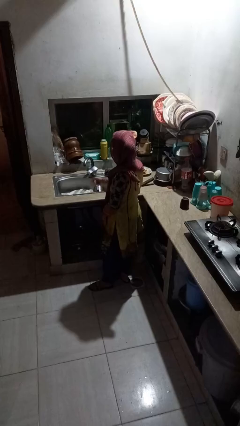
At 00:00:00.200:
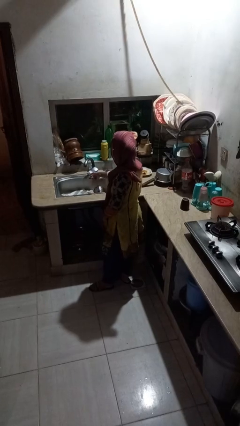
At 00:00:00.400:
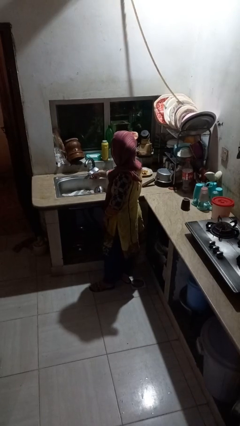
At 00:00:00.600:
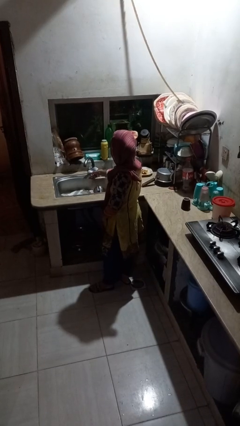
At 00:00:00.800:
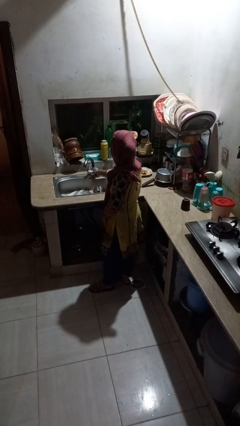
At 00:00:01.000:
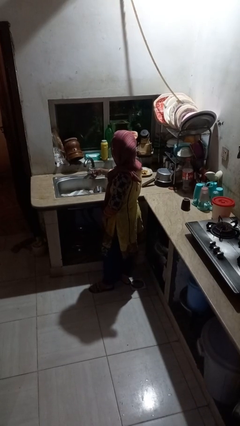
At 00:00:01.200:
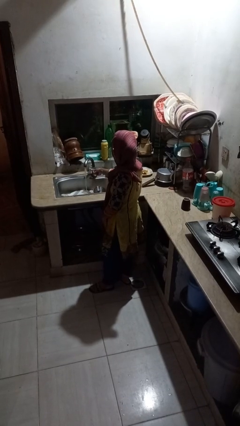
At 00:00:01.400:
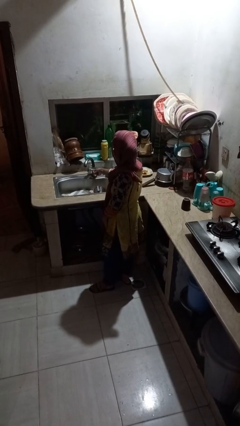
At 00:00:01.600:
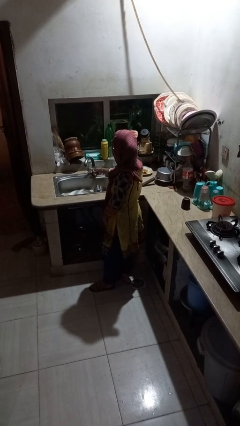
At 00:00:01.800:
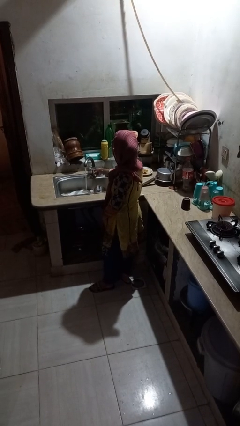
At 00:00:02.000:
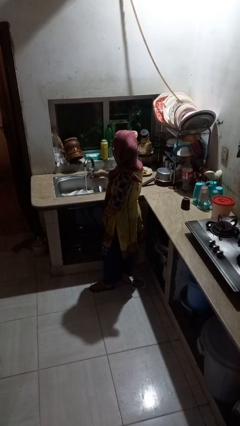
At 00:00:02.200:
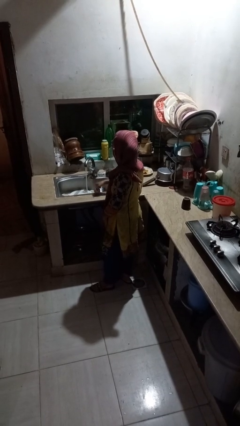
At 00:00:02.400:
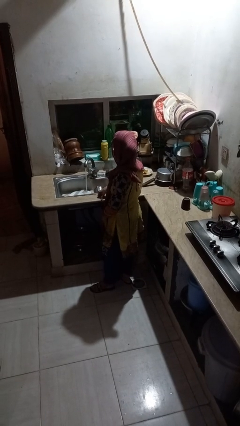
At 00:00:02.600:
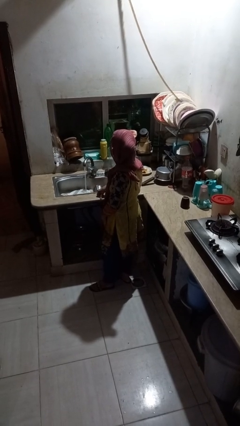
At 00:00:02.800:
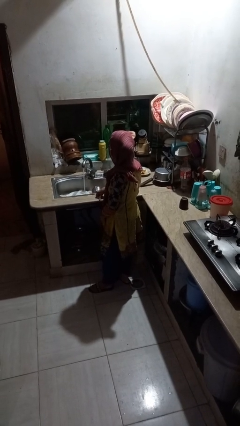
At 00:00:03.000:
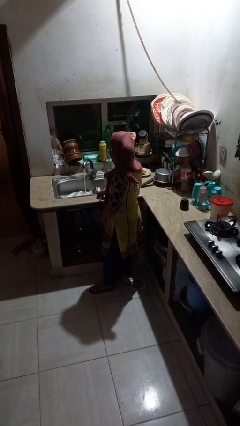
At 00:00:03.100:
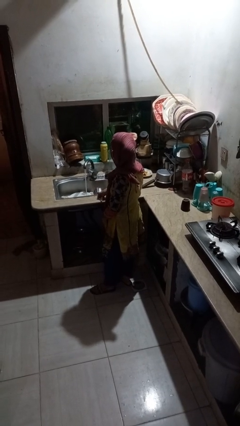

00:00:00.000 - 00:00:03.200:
person turns on faucet

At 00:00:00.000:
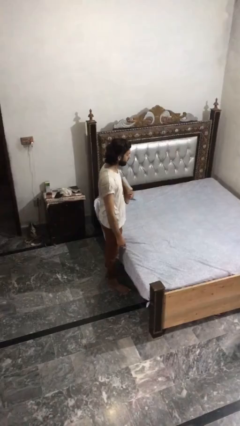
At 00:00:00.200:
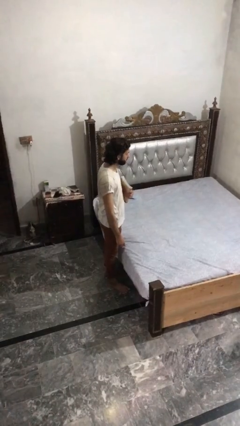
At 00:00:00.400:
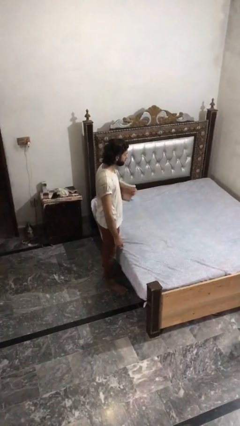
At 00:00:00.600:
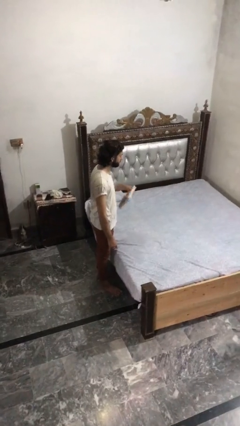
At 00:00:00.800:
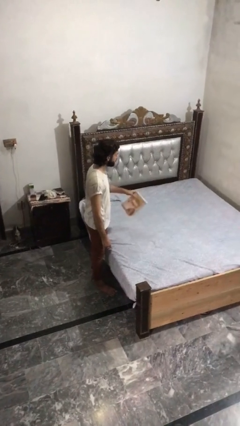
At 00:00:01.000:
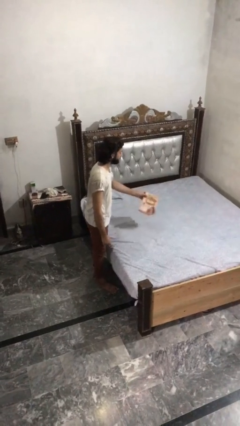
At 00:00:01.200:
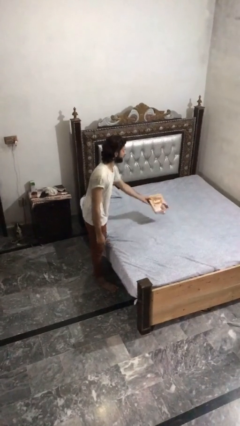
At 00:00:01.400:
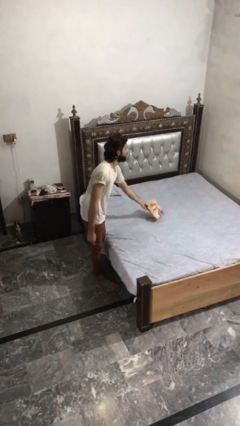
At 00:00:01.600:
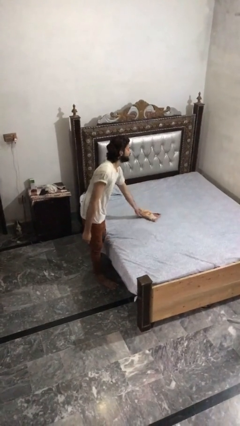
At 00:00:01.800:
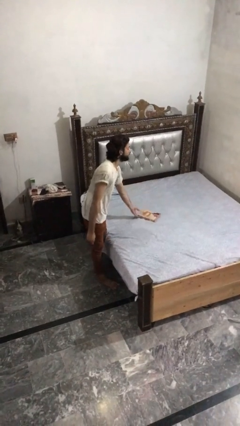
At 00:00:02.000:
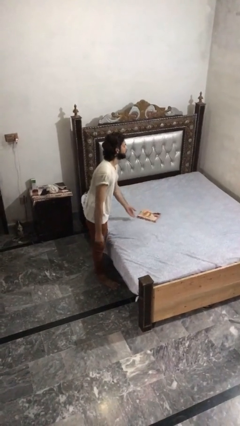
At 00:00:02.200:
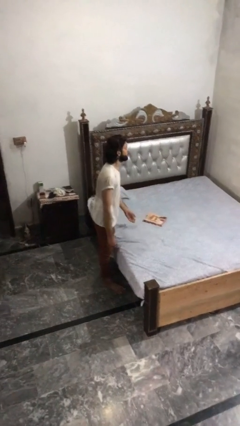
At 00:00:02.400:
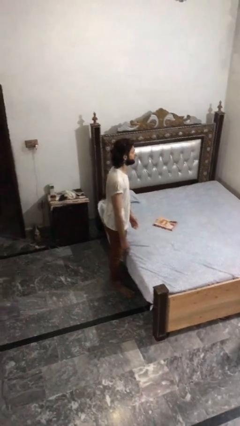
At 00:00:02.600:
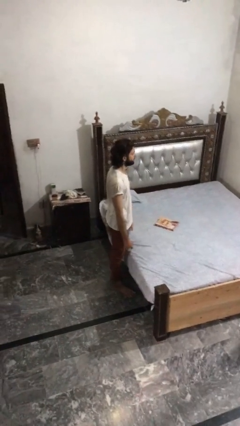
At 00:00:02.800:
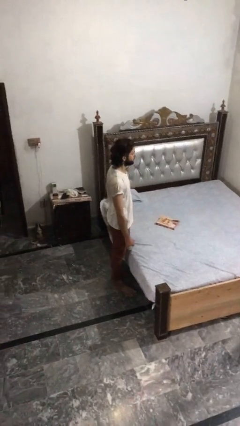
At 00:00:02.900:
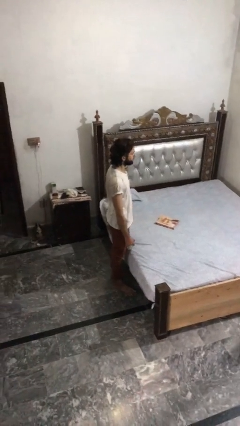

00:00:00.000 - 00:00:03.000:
person puts down object on bed

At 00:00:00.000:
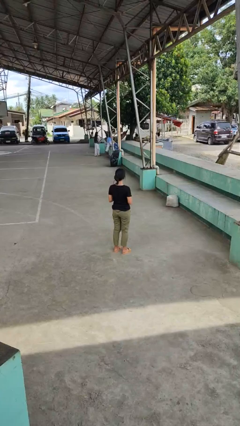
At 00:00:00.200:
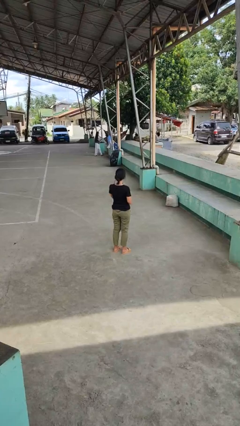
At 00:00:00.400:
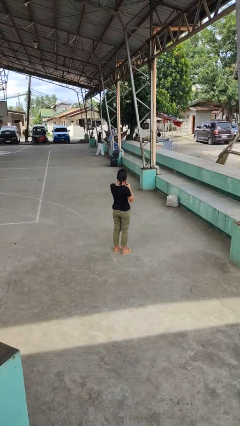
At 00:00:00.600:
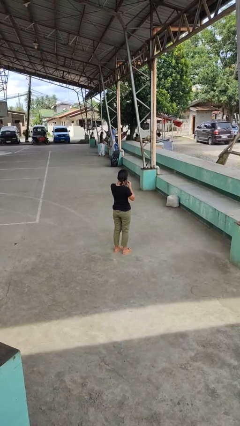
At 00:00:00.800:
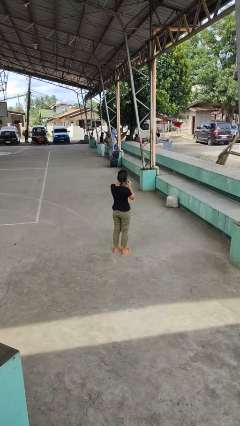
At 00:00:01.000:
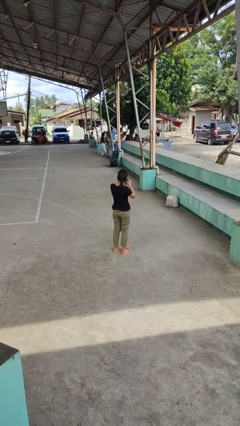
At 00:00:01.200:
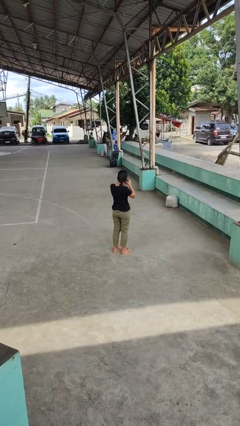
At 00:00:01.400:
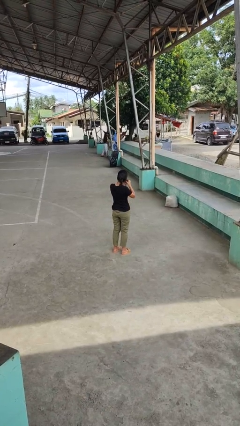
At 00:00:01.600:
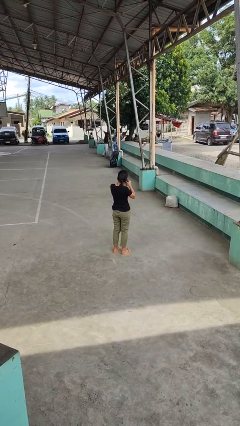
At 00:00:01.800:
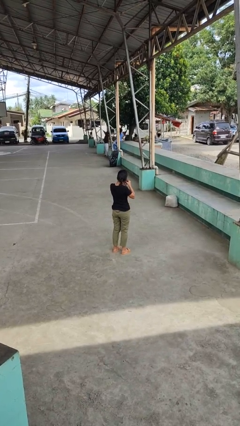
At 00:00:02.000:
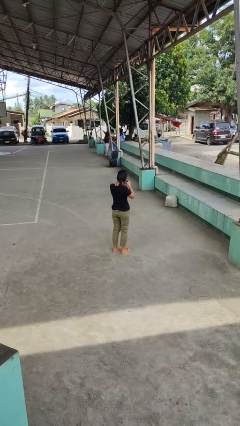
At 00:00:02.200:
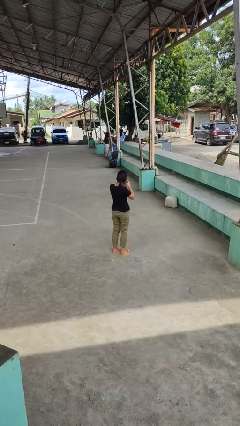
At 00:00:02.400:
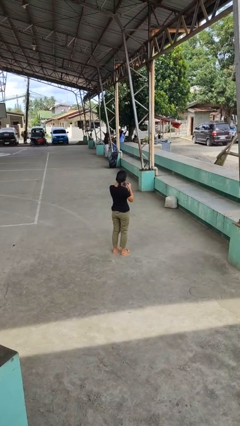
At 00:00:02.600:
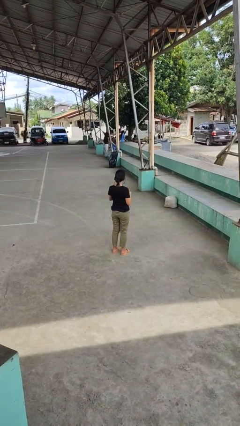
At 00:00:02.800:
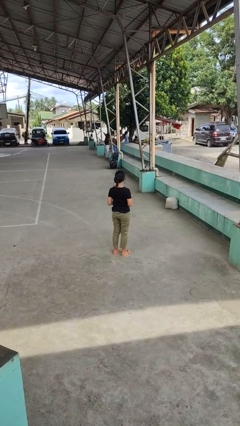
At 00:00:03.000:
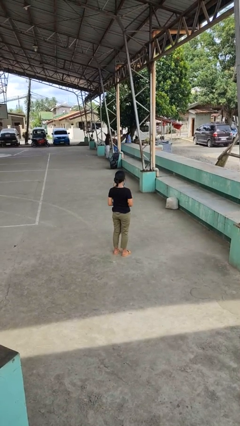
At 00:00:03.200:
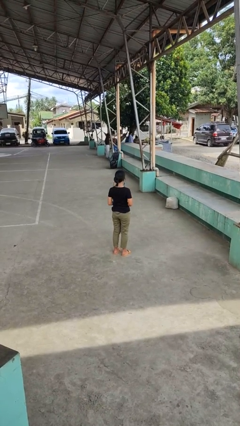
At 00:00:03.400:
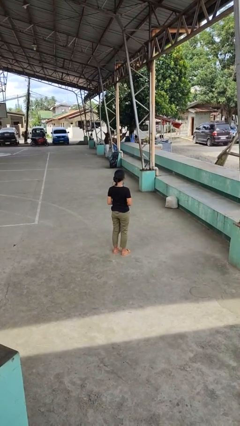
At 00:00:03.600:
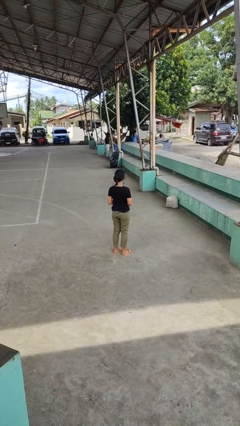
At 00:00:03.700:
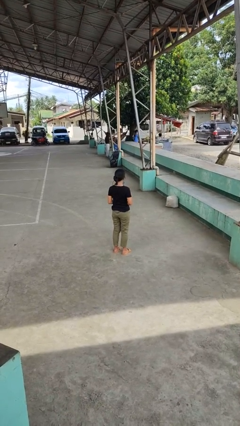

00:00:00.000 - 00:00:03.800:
person puts on earrings

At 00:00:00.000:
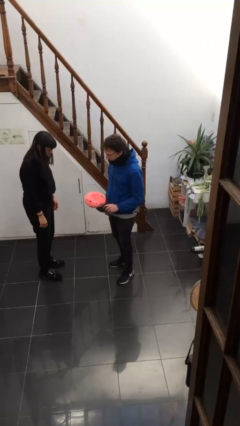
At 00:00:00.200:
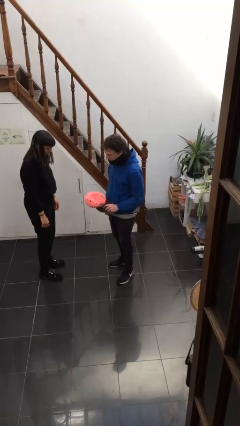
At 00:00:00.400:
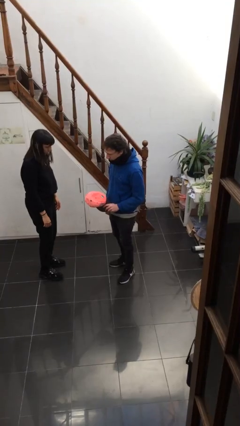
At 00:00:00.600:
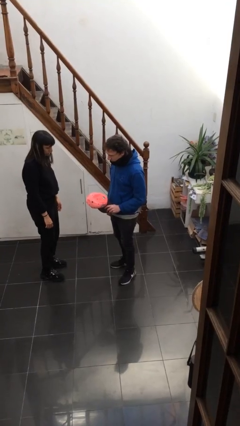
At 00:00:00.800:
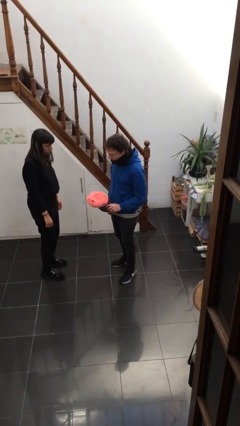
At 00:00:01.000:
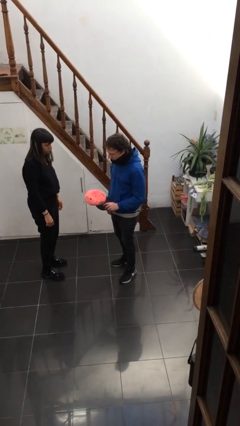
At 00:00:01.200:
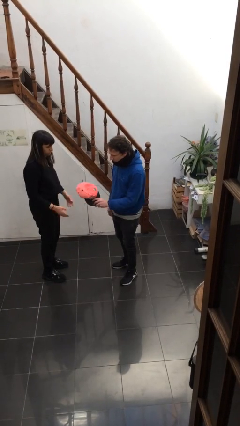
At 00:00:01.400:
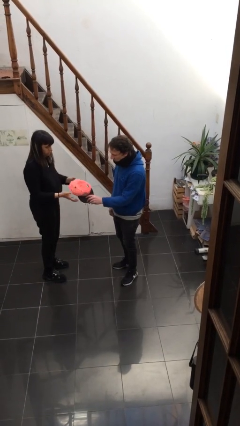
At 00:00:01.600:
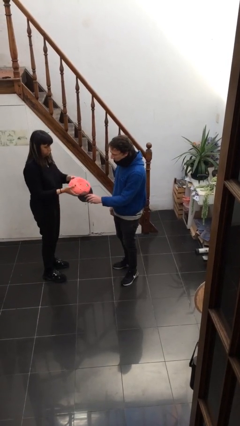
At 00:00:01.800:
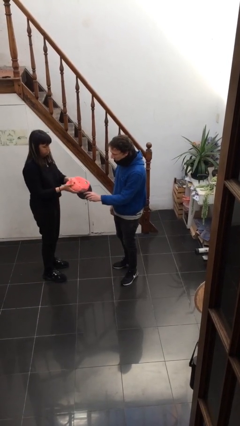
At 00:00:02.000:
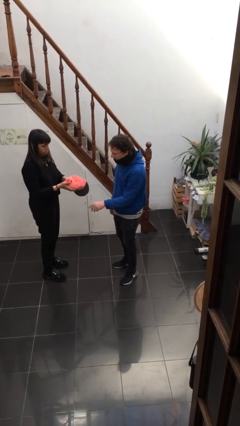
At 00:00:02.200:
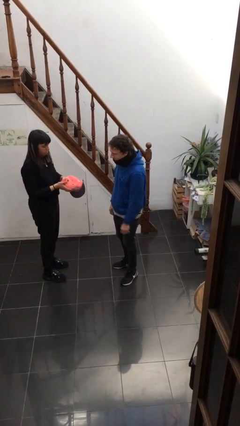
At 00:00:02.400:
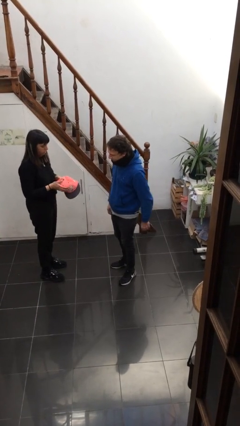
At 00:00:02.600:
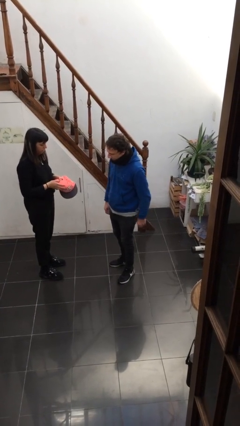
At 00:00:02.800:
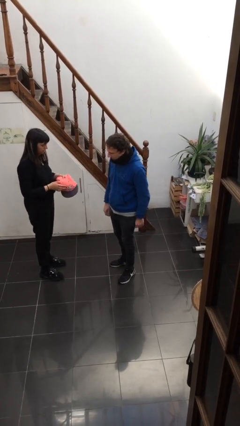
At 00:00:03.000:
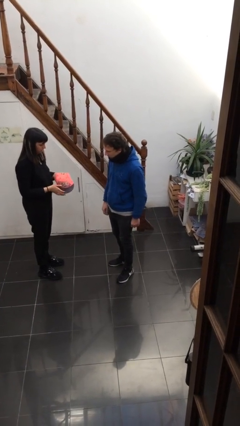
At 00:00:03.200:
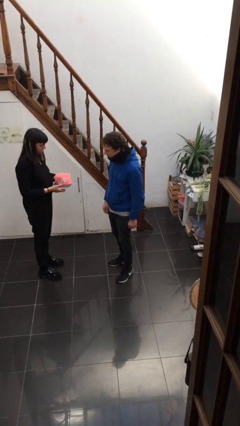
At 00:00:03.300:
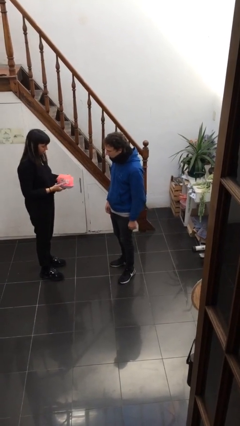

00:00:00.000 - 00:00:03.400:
person transfers object to person

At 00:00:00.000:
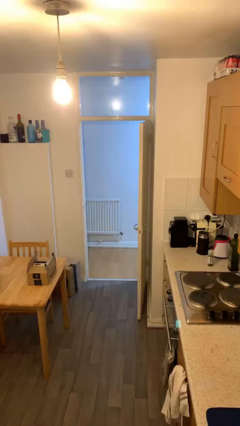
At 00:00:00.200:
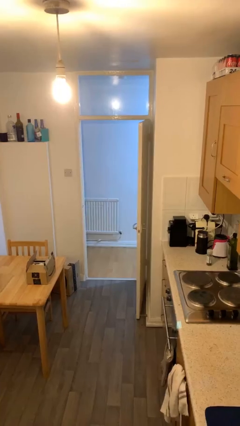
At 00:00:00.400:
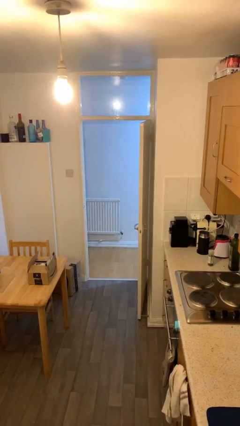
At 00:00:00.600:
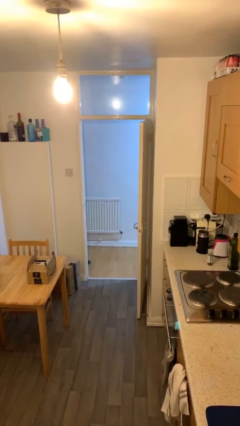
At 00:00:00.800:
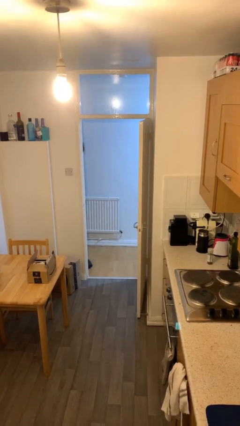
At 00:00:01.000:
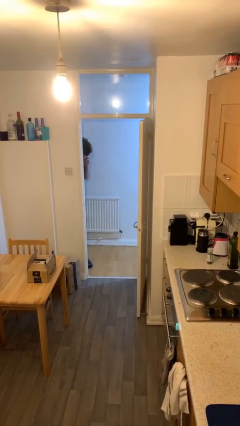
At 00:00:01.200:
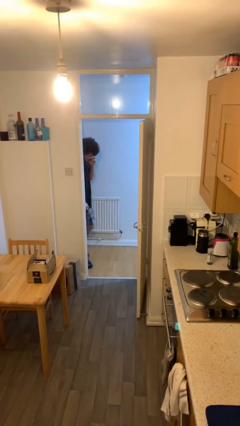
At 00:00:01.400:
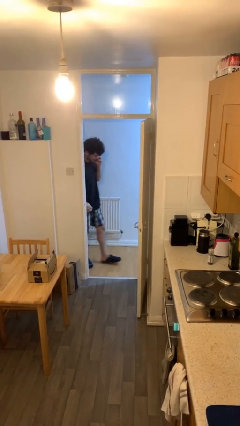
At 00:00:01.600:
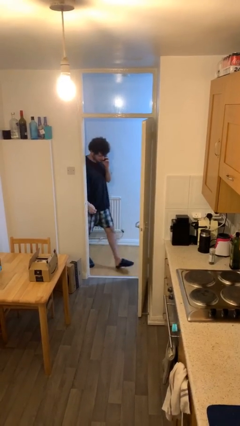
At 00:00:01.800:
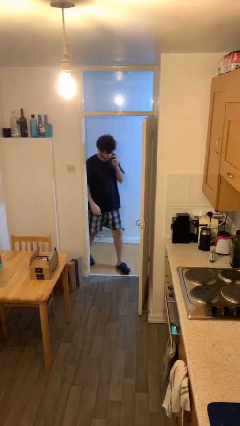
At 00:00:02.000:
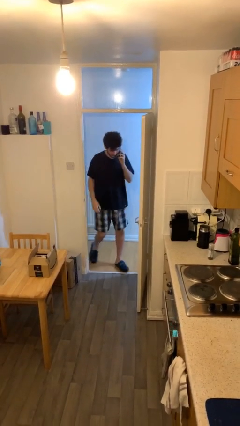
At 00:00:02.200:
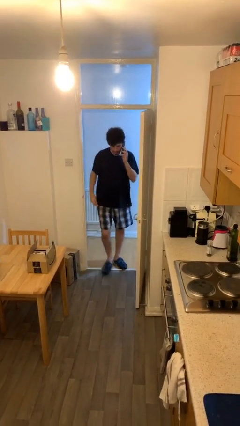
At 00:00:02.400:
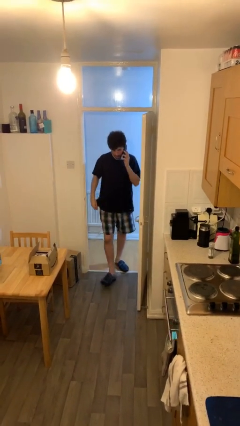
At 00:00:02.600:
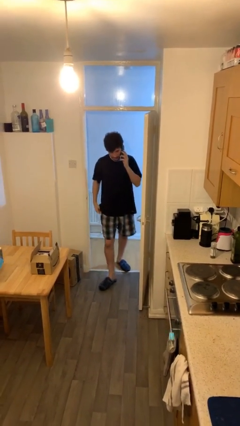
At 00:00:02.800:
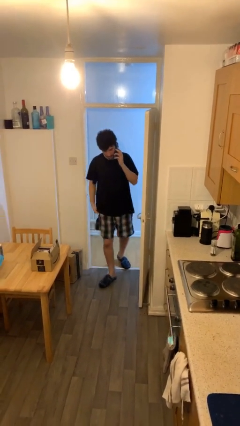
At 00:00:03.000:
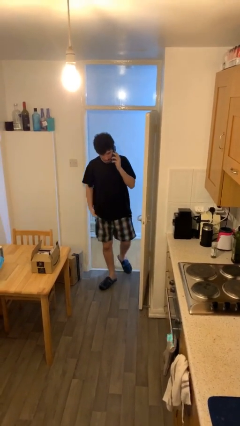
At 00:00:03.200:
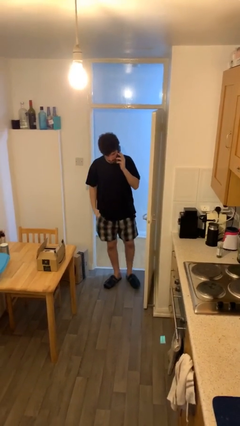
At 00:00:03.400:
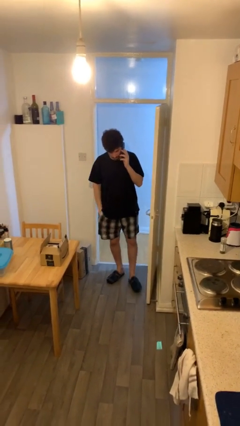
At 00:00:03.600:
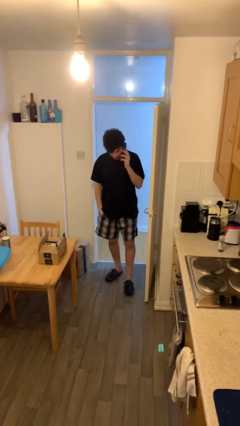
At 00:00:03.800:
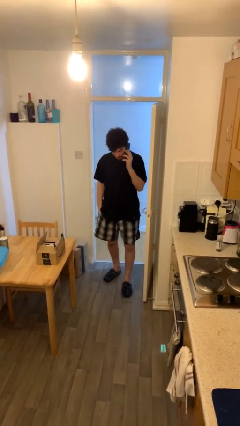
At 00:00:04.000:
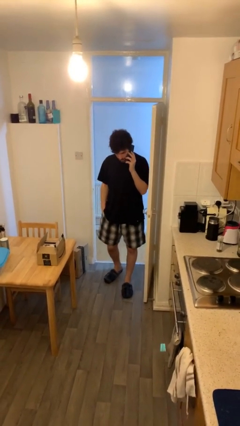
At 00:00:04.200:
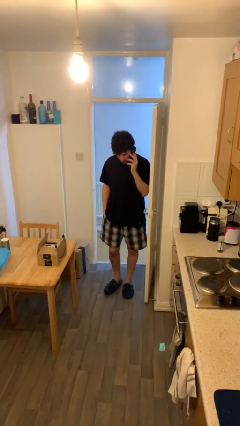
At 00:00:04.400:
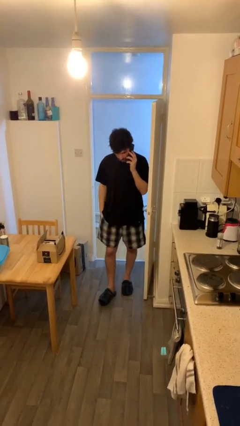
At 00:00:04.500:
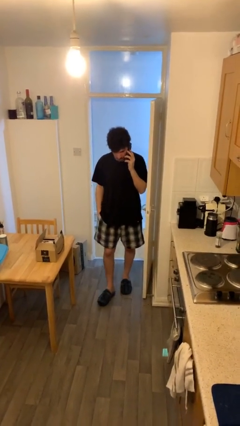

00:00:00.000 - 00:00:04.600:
person enters scene through structure
